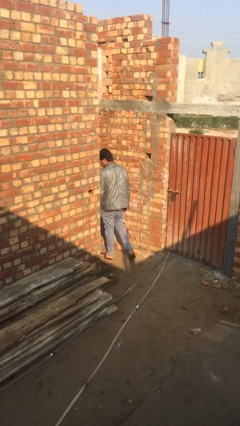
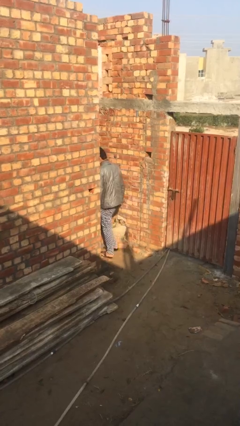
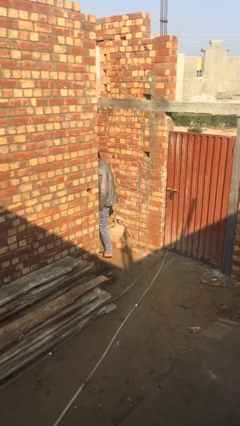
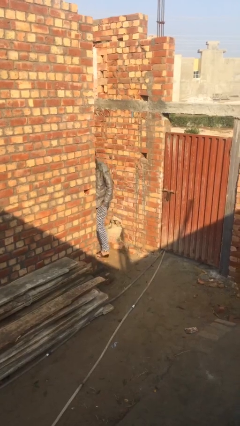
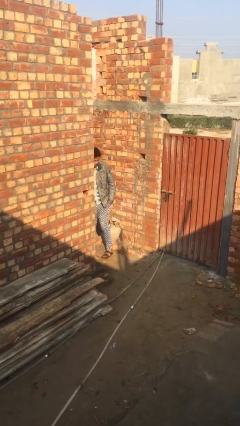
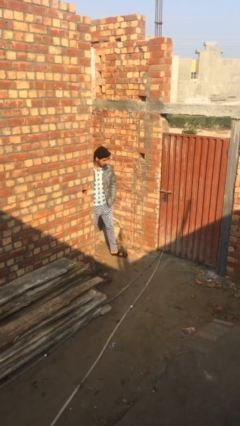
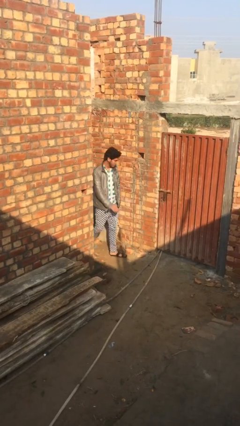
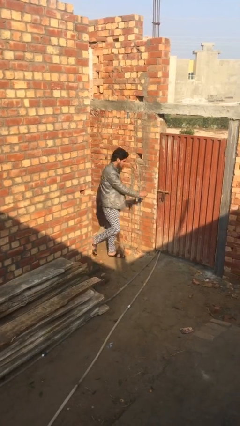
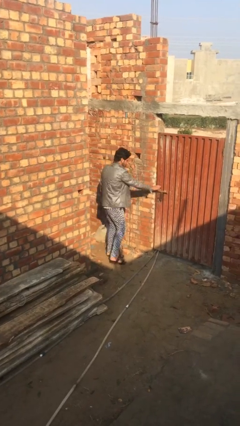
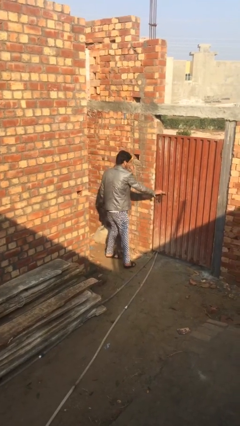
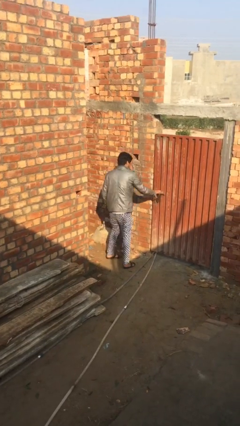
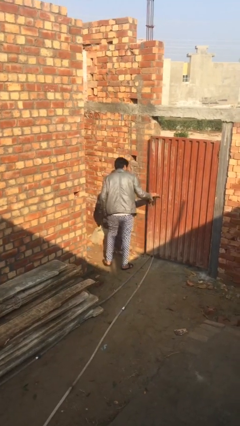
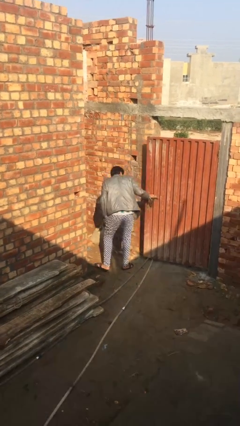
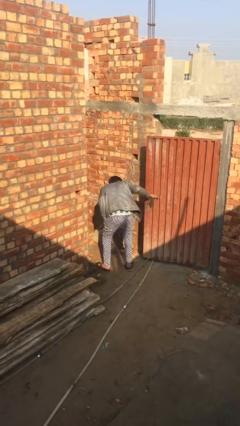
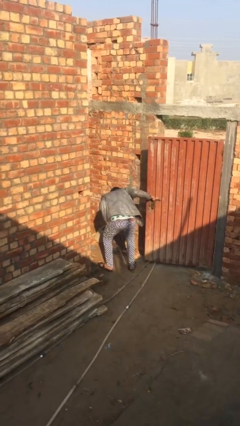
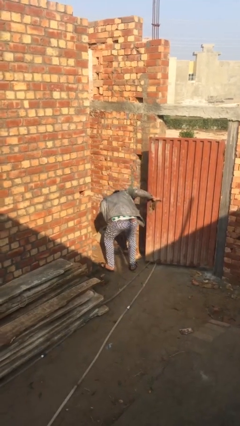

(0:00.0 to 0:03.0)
person opens facility door

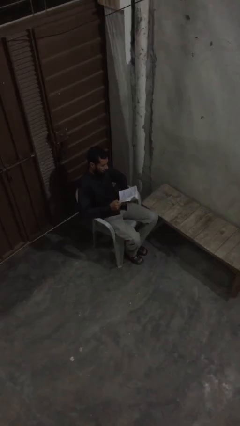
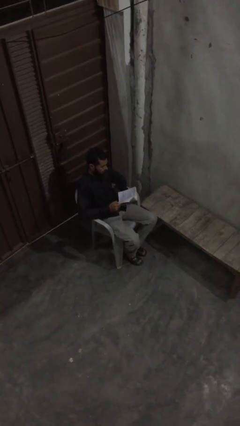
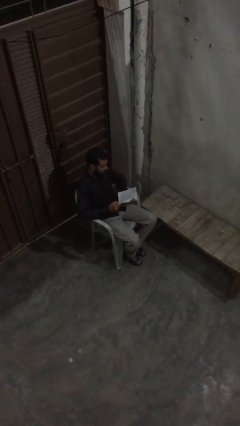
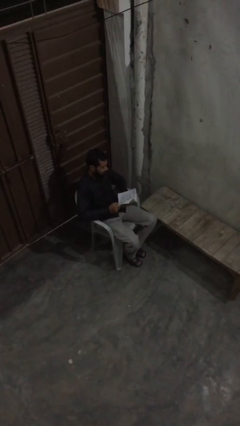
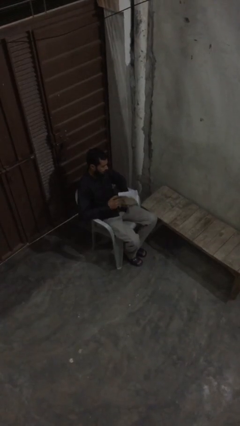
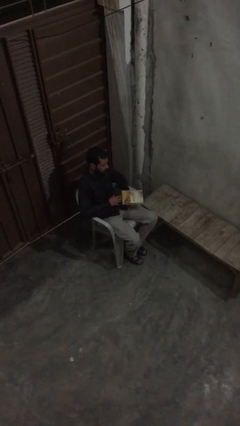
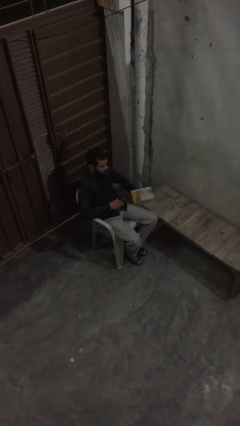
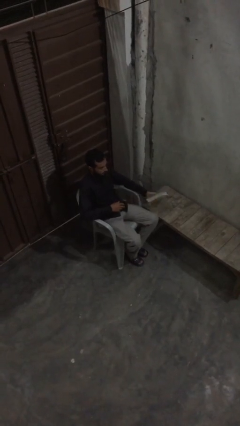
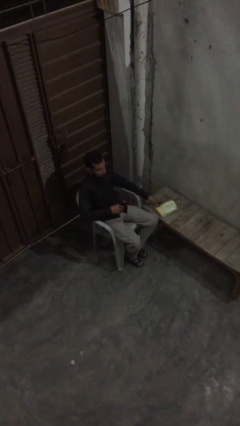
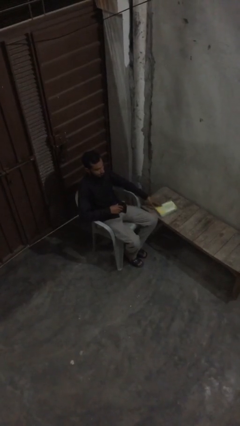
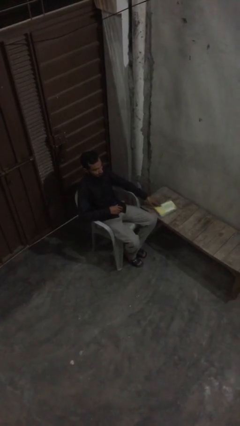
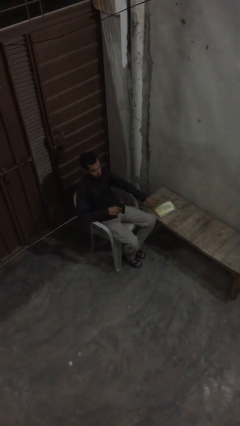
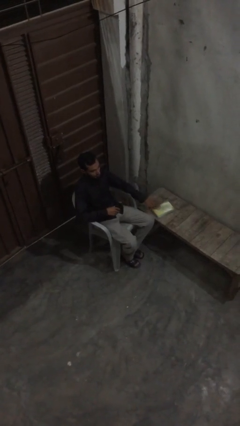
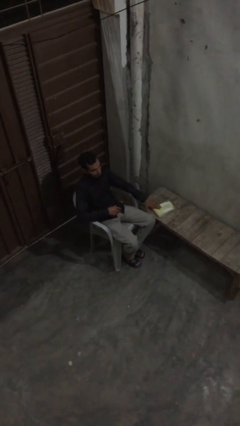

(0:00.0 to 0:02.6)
person puts down object on table

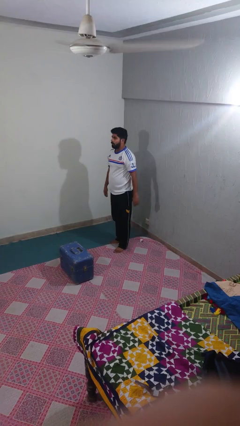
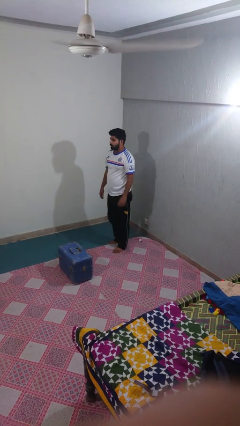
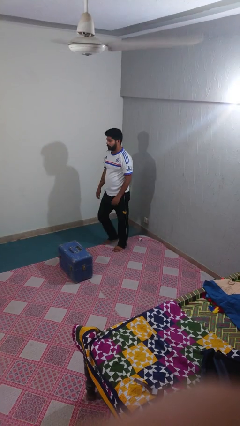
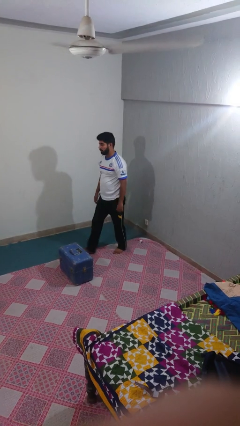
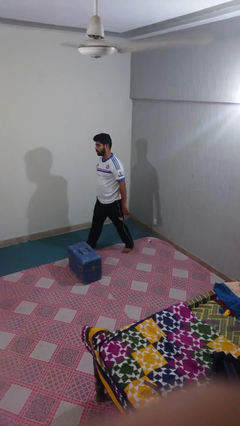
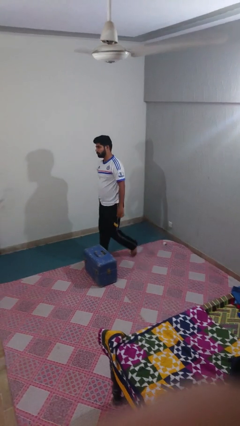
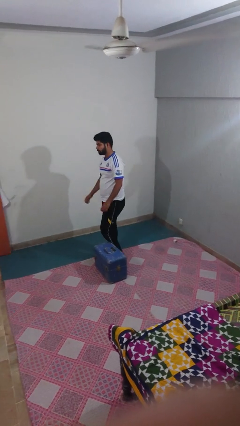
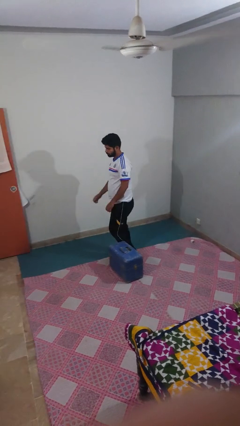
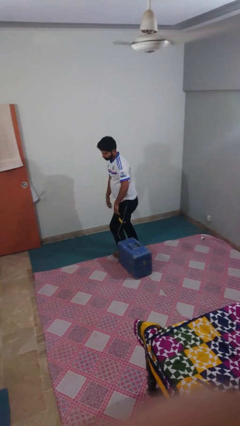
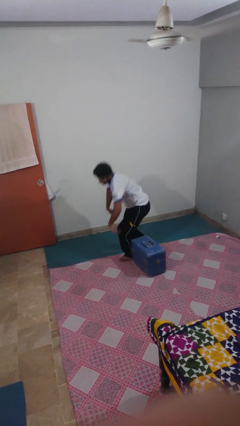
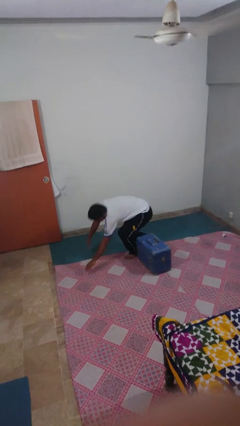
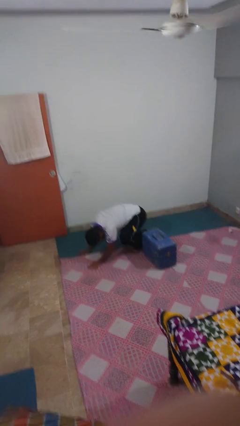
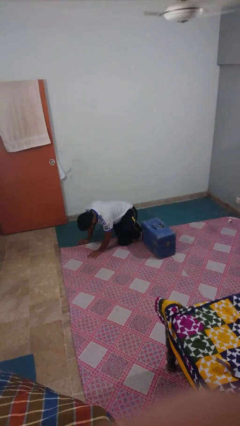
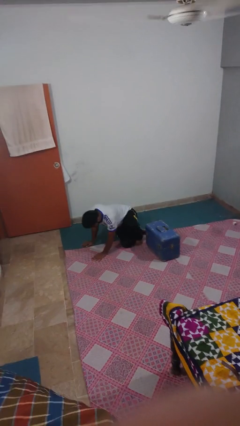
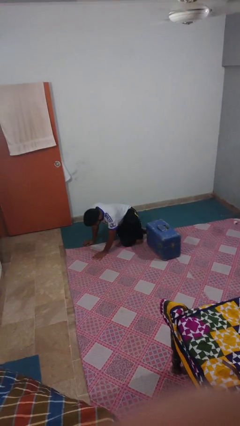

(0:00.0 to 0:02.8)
person trips on object on floor

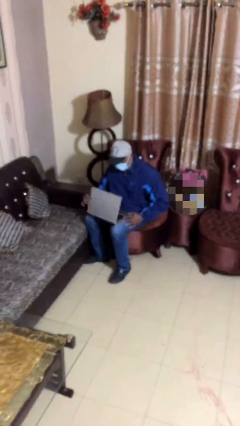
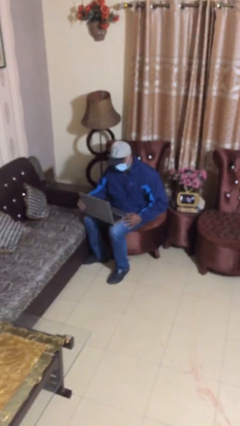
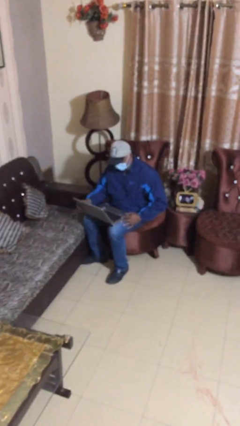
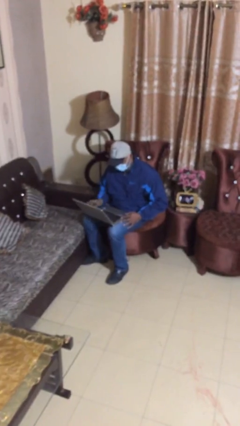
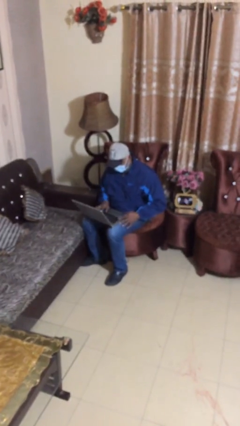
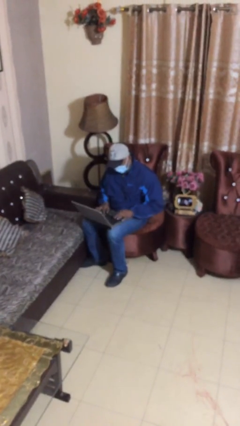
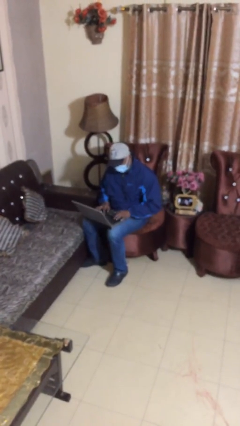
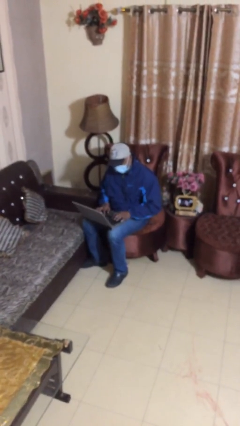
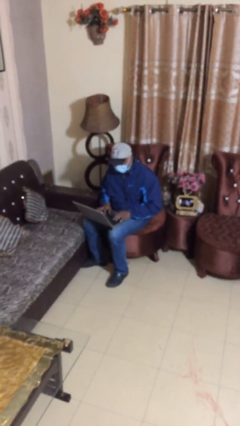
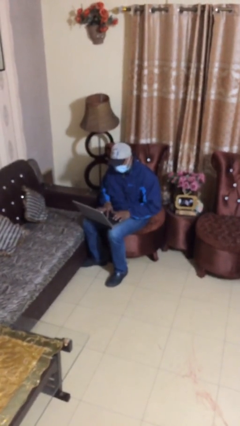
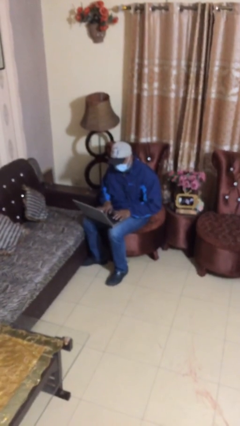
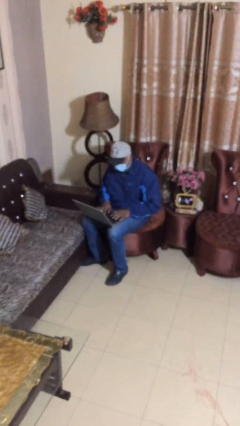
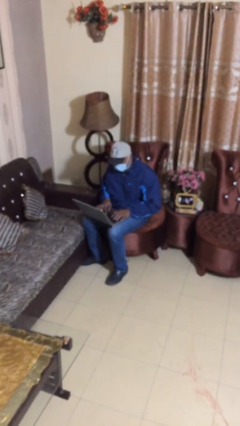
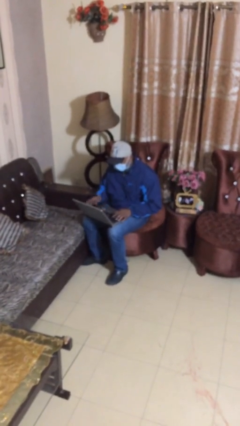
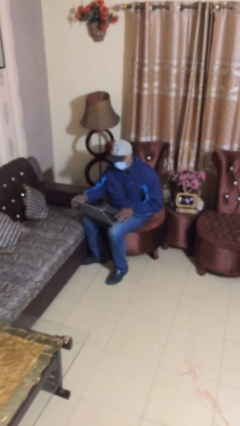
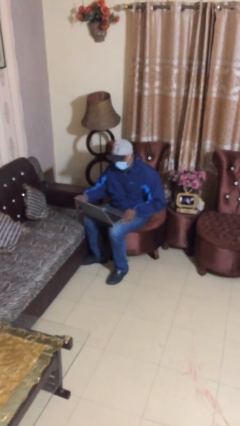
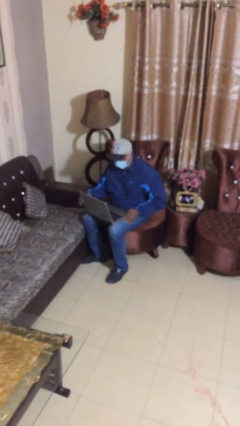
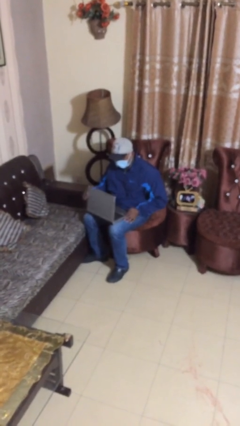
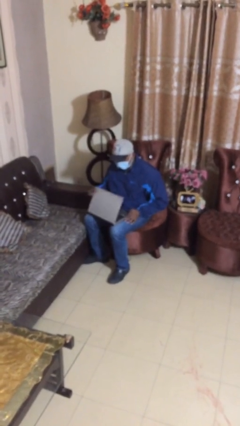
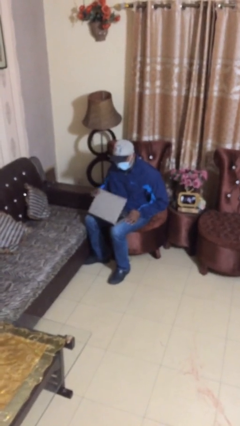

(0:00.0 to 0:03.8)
person interacts with laptop

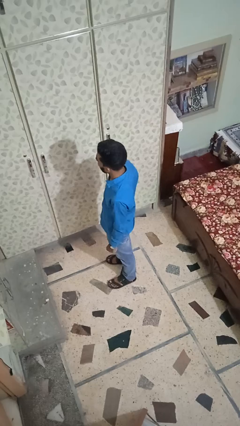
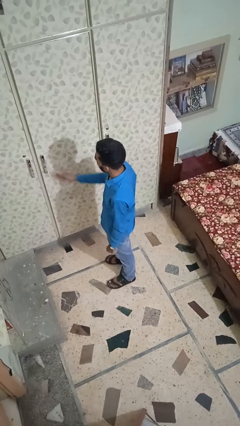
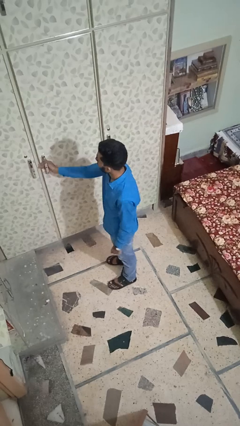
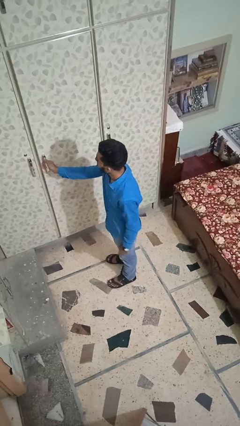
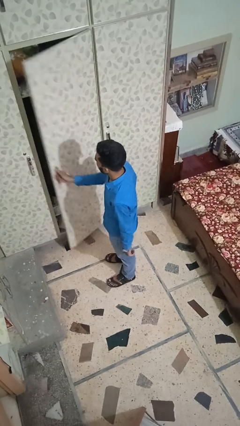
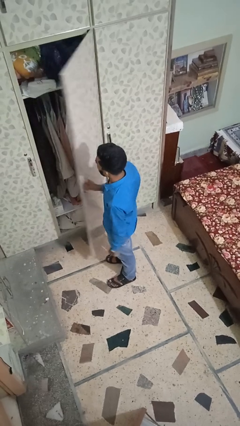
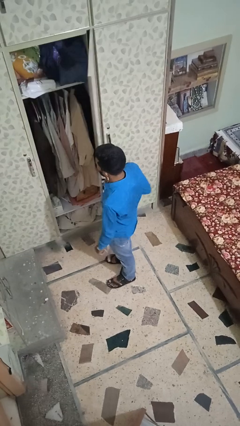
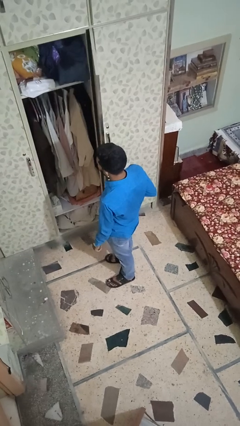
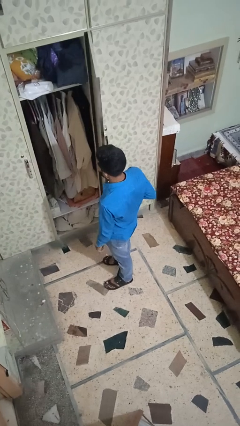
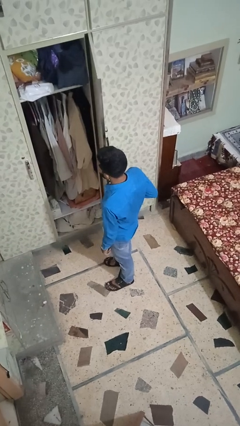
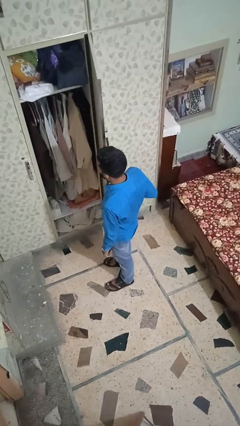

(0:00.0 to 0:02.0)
person opens closet door

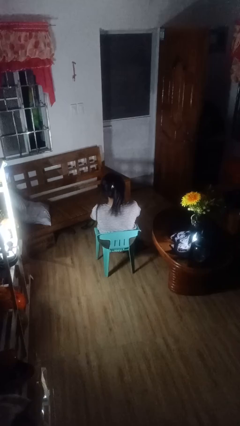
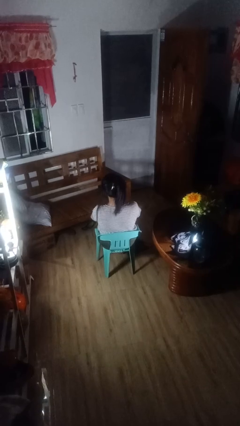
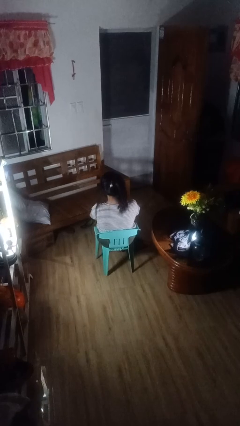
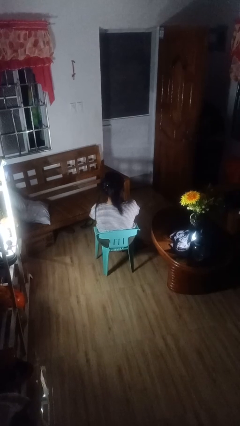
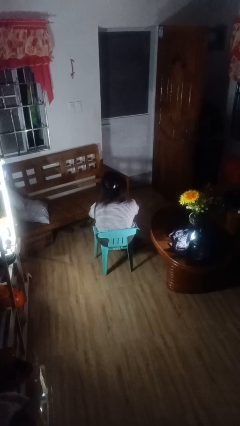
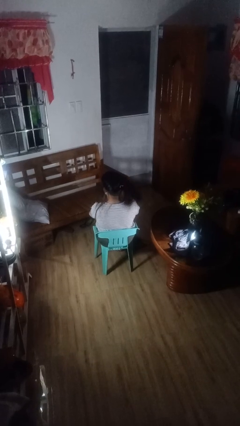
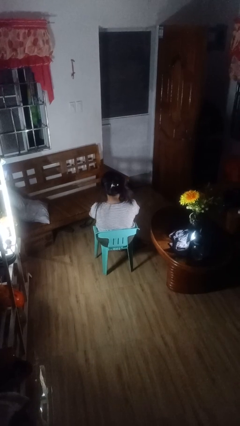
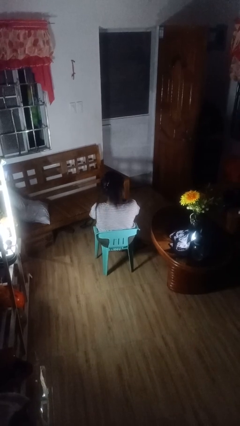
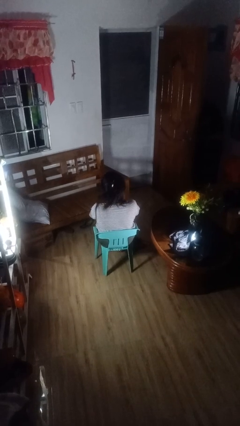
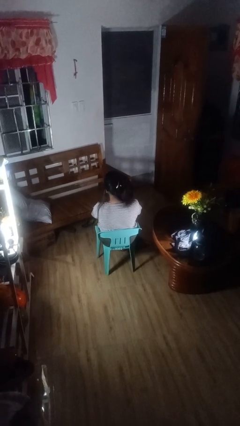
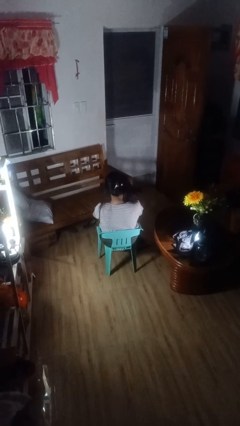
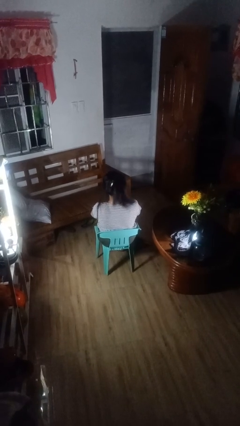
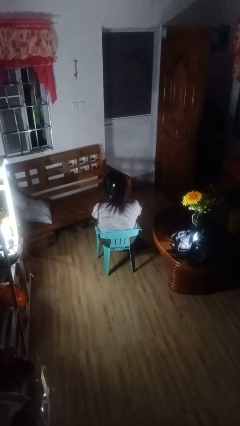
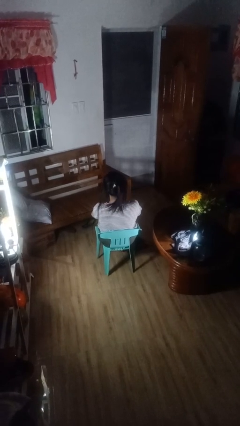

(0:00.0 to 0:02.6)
person shakes head

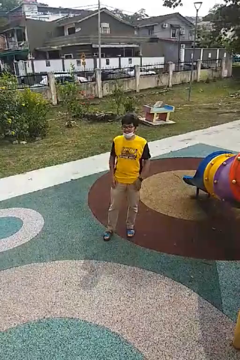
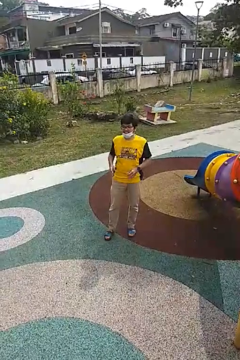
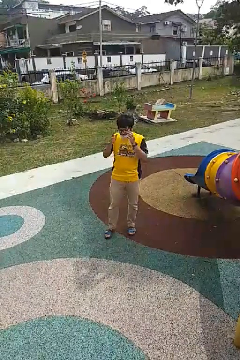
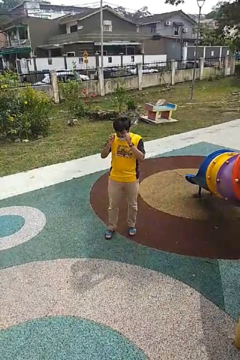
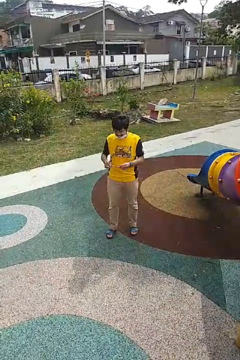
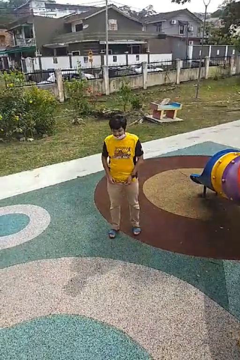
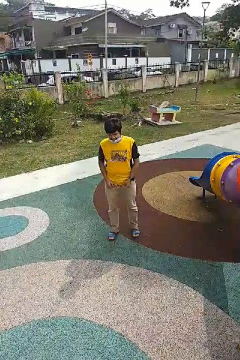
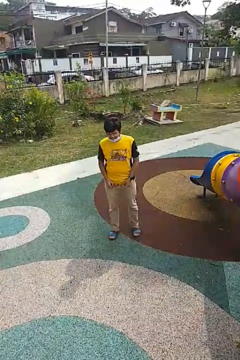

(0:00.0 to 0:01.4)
person takes off glasses
